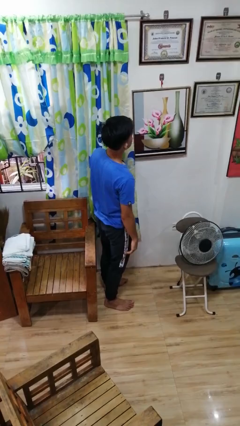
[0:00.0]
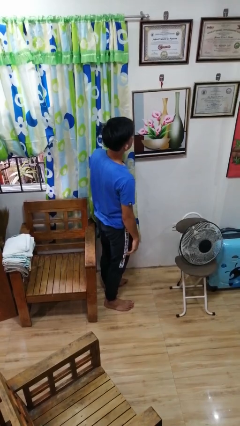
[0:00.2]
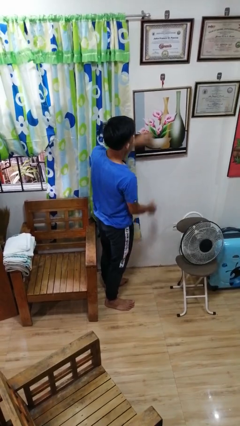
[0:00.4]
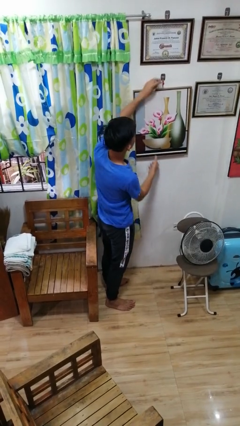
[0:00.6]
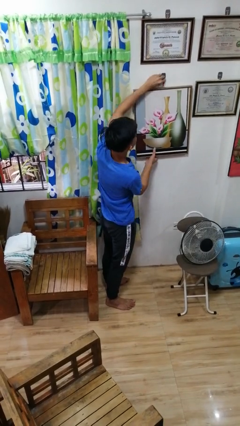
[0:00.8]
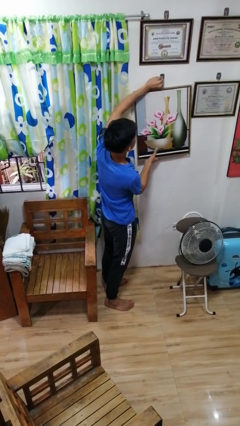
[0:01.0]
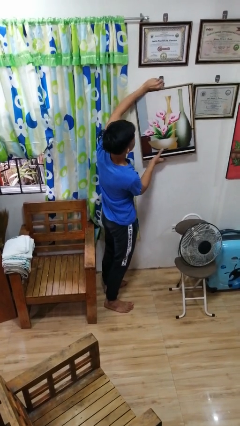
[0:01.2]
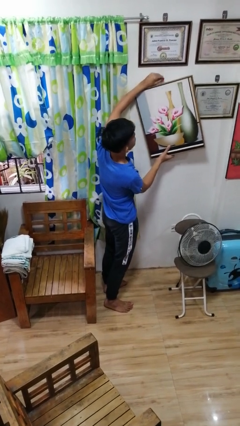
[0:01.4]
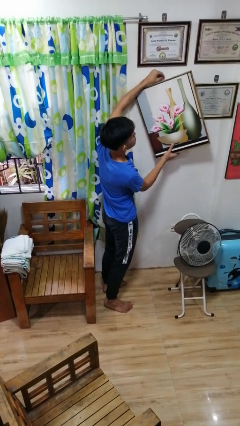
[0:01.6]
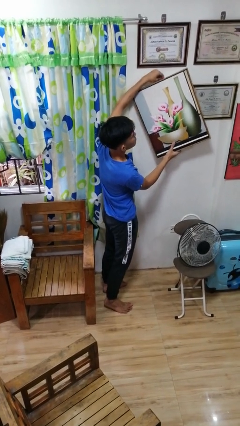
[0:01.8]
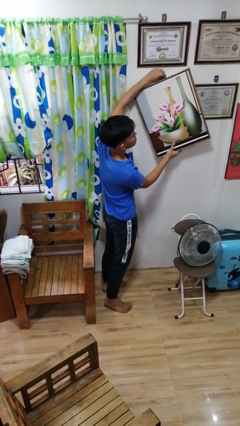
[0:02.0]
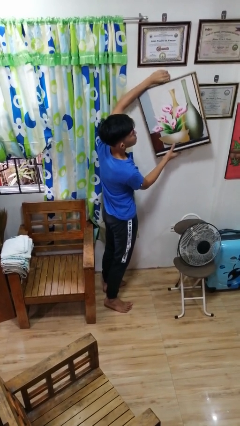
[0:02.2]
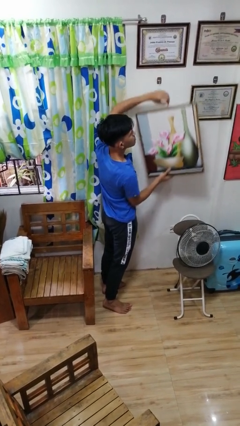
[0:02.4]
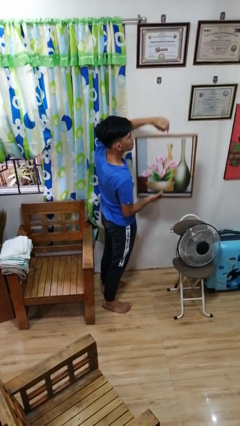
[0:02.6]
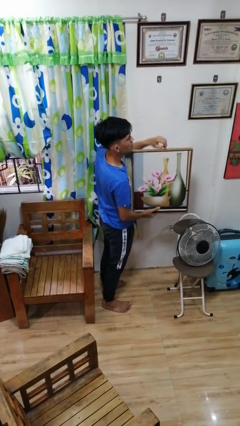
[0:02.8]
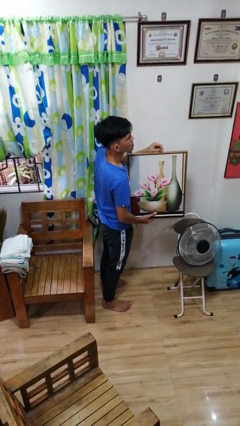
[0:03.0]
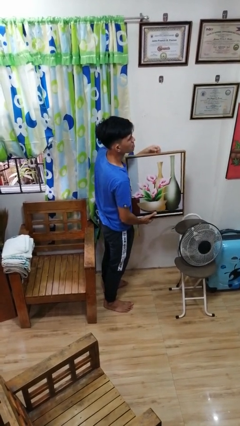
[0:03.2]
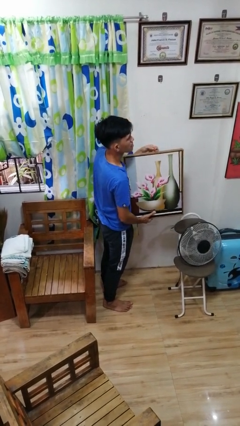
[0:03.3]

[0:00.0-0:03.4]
person takes down picture frame

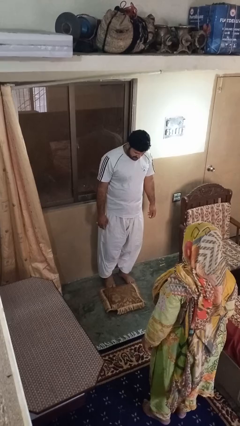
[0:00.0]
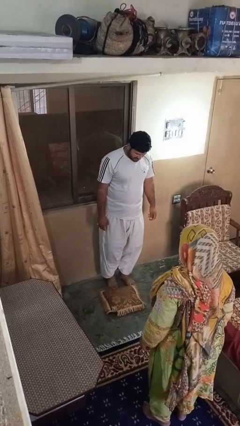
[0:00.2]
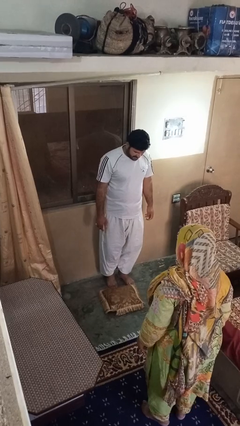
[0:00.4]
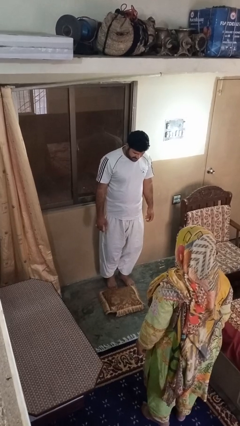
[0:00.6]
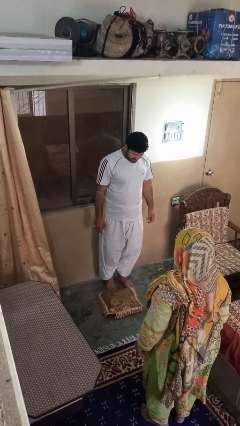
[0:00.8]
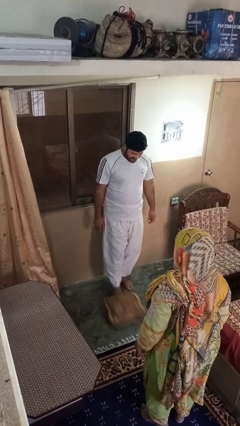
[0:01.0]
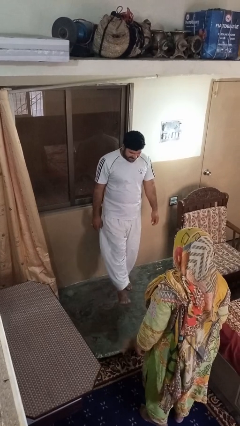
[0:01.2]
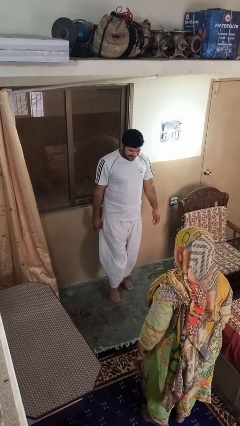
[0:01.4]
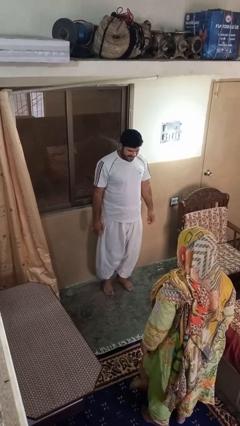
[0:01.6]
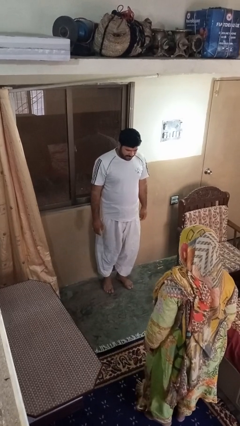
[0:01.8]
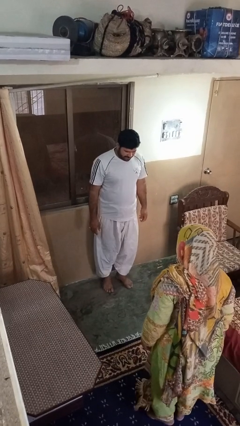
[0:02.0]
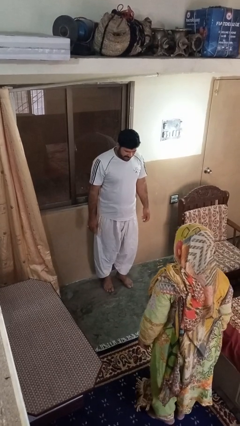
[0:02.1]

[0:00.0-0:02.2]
person kicks object to person

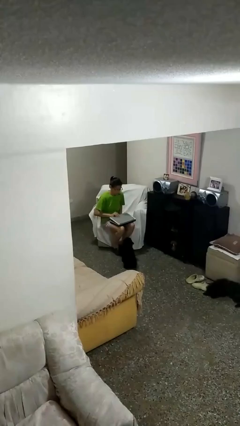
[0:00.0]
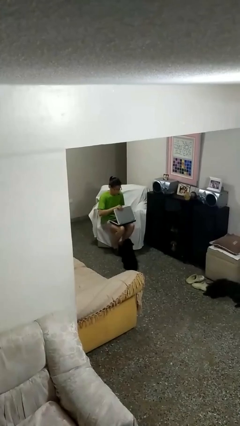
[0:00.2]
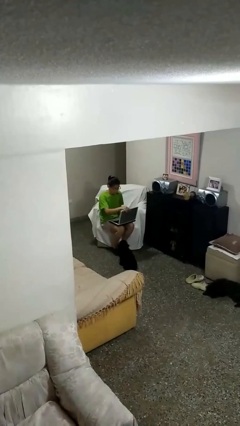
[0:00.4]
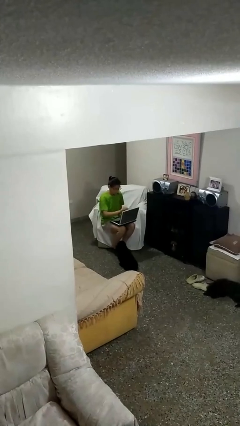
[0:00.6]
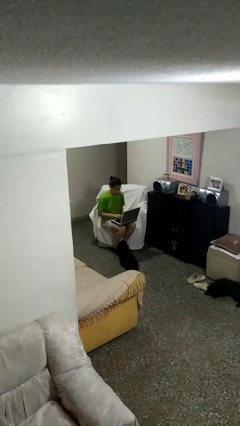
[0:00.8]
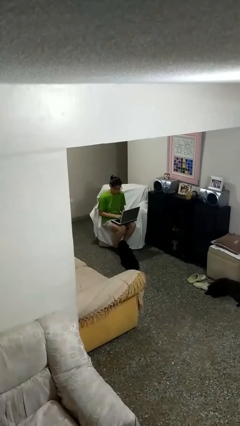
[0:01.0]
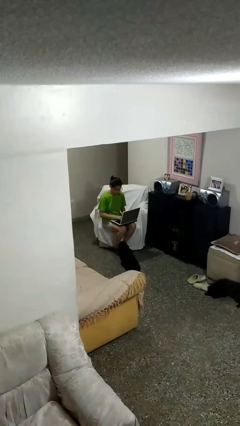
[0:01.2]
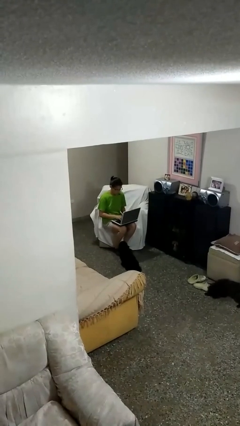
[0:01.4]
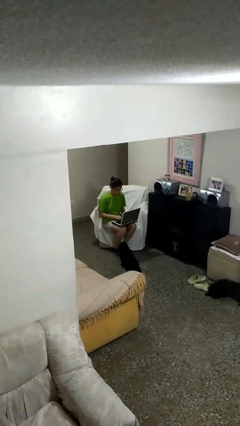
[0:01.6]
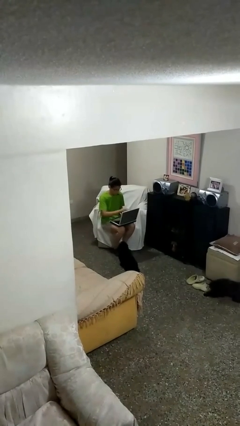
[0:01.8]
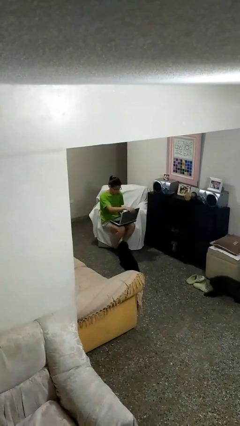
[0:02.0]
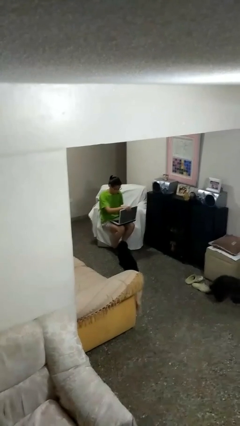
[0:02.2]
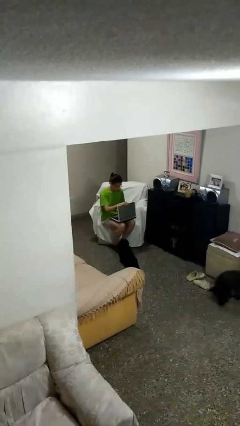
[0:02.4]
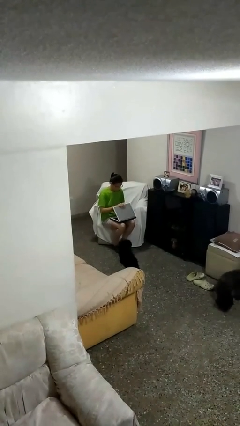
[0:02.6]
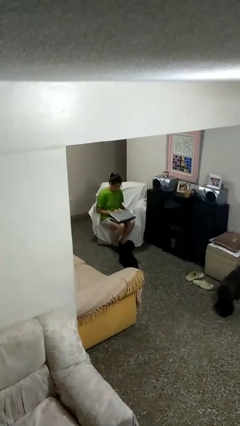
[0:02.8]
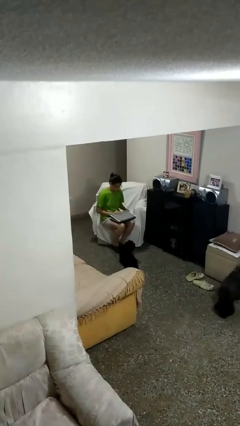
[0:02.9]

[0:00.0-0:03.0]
person interacts with laptop

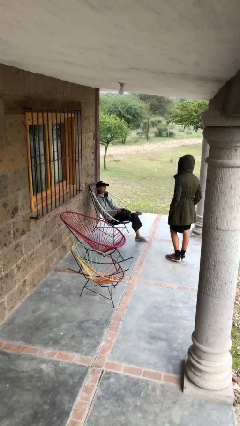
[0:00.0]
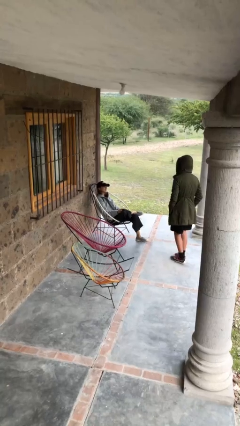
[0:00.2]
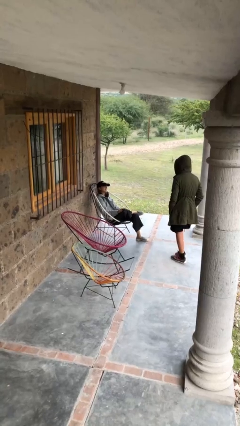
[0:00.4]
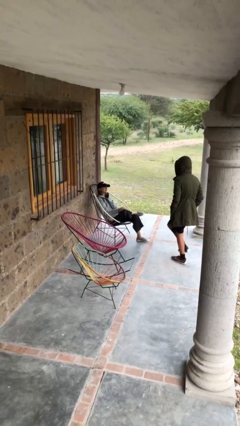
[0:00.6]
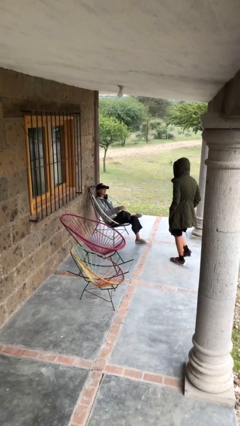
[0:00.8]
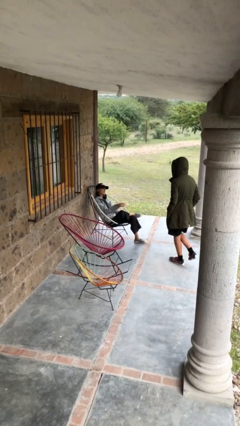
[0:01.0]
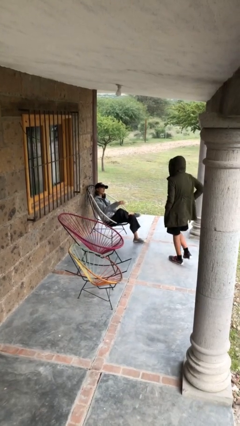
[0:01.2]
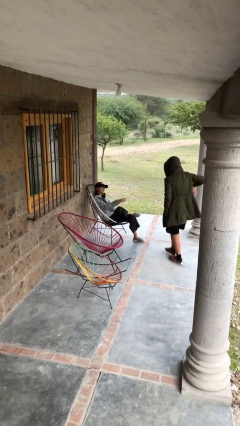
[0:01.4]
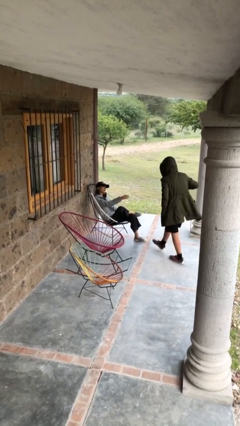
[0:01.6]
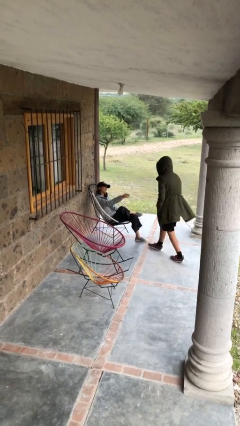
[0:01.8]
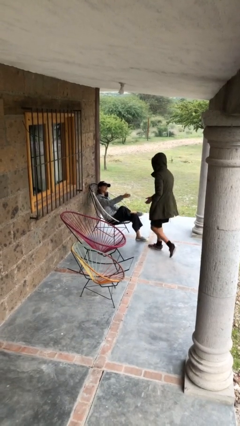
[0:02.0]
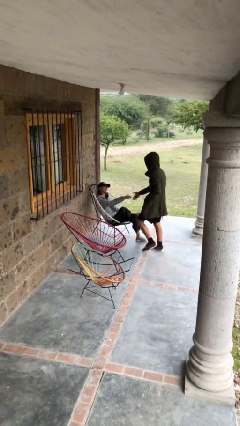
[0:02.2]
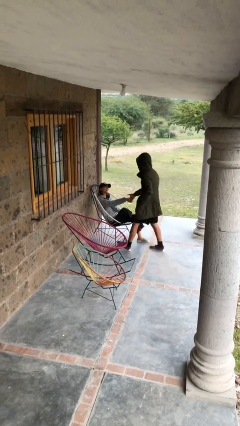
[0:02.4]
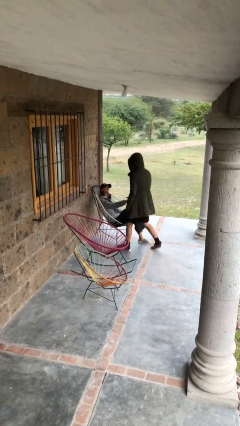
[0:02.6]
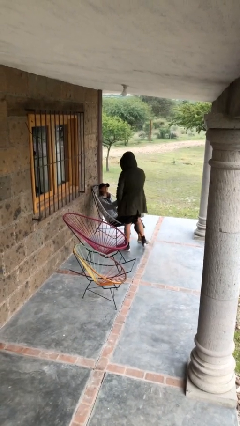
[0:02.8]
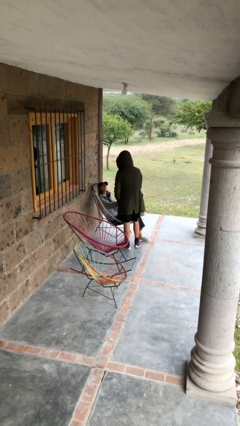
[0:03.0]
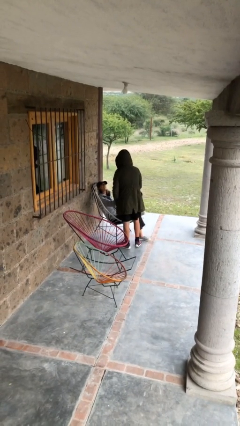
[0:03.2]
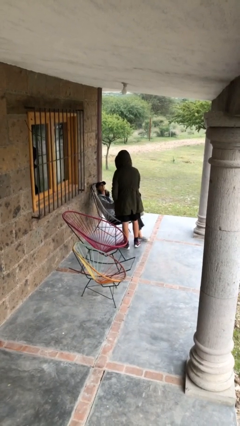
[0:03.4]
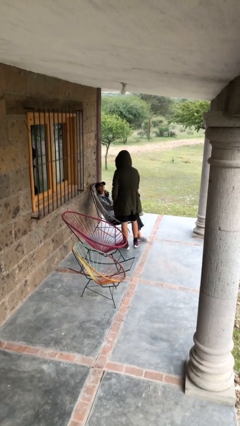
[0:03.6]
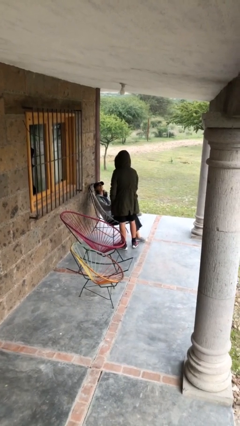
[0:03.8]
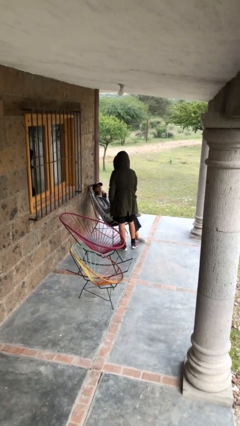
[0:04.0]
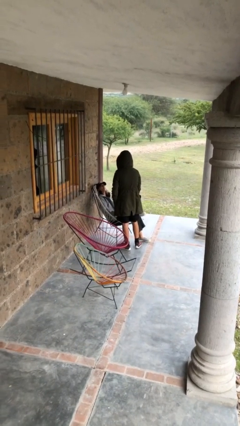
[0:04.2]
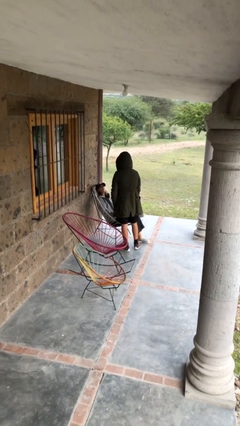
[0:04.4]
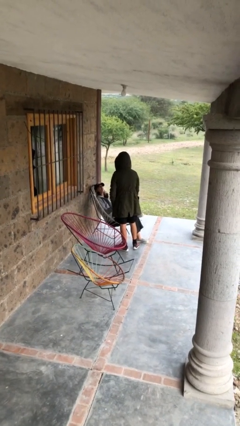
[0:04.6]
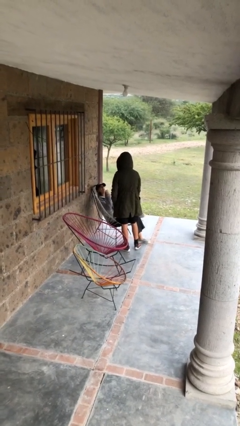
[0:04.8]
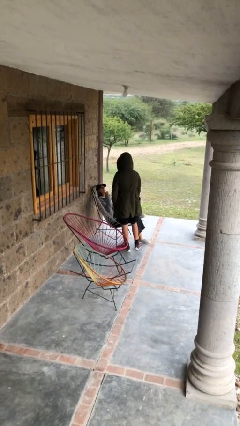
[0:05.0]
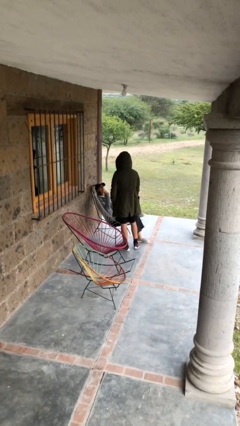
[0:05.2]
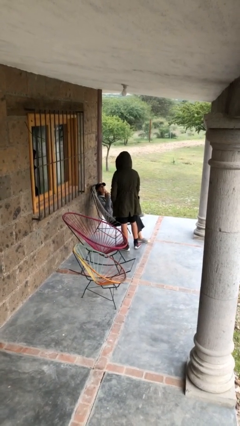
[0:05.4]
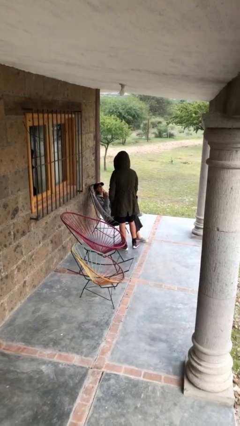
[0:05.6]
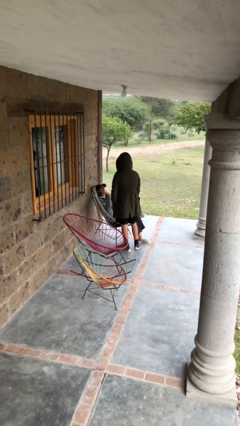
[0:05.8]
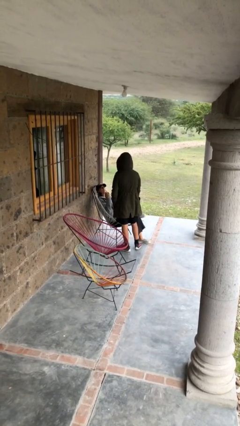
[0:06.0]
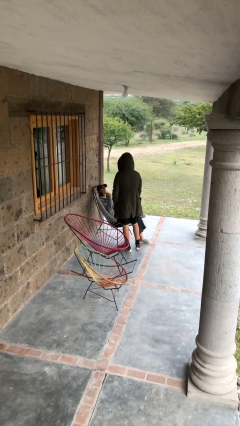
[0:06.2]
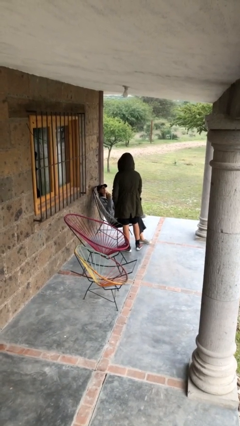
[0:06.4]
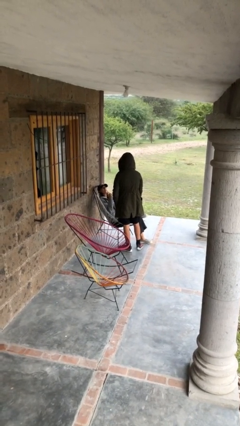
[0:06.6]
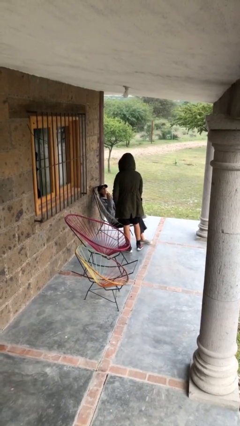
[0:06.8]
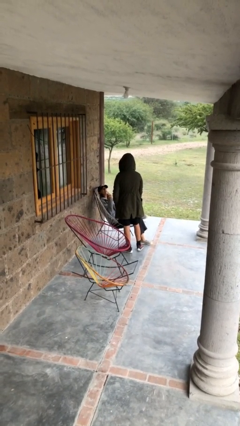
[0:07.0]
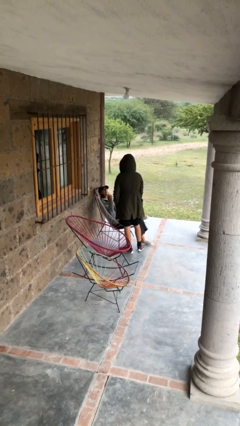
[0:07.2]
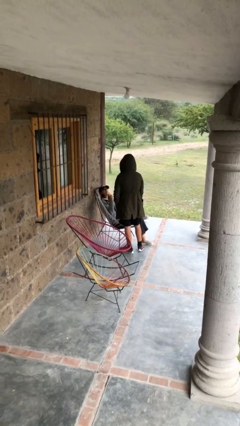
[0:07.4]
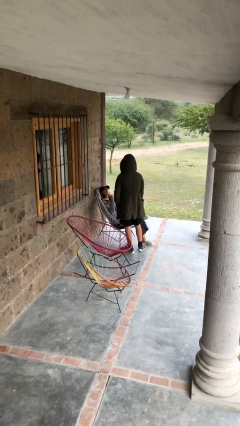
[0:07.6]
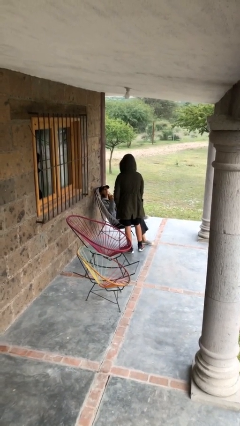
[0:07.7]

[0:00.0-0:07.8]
person shakes hand

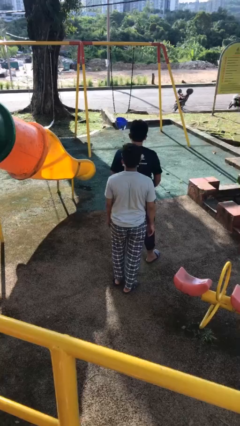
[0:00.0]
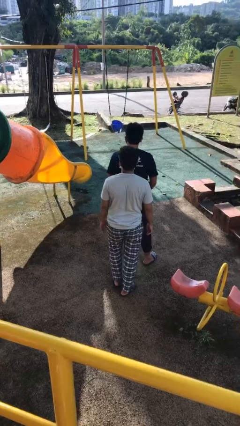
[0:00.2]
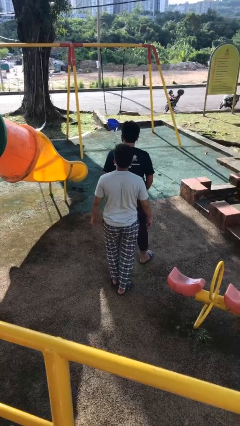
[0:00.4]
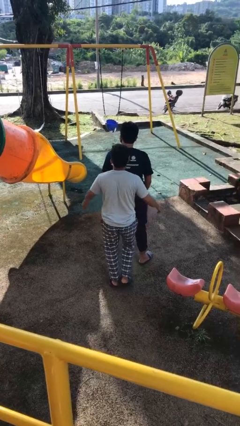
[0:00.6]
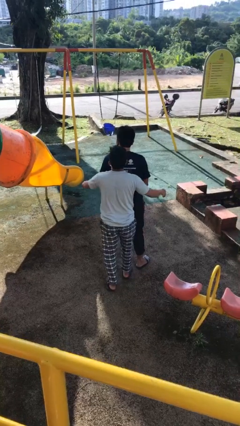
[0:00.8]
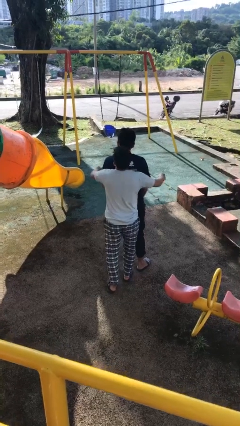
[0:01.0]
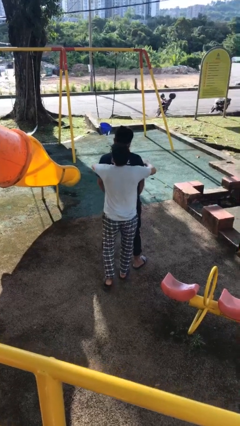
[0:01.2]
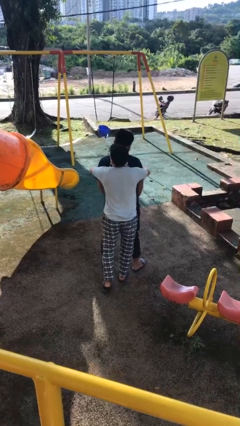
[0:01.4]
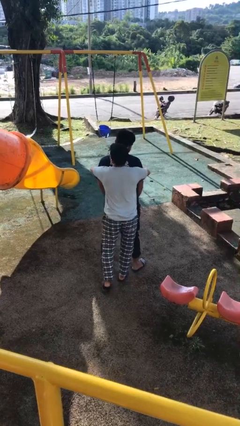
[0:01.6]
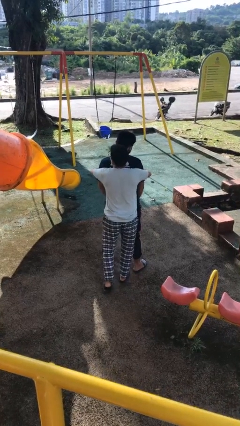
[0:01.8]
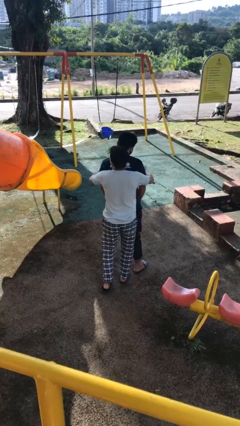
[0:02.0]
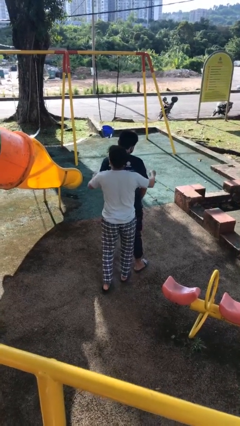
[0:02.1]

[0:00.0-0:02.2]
person hugs person from behind
